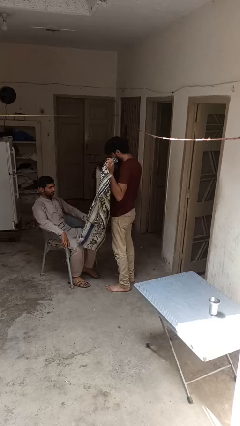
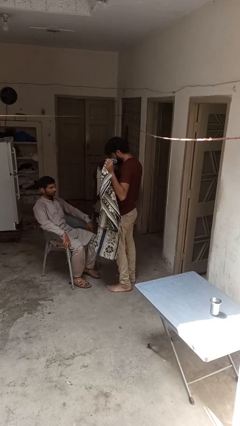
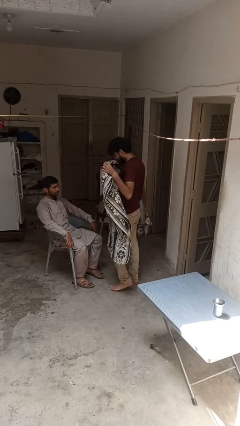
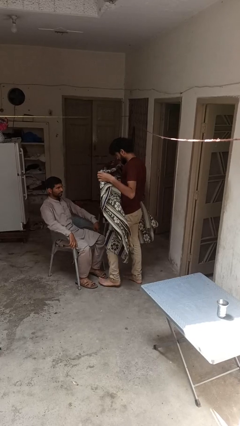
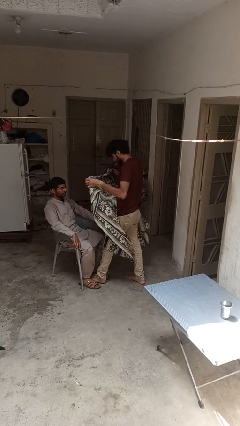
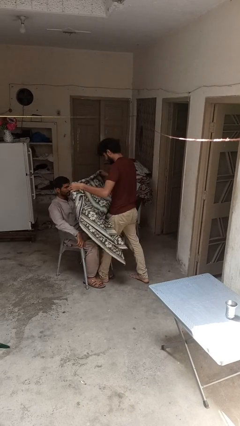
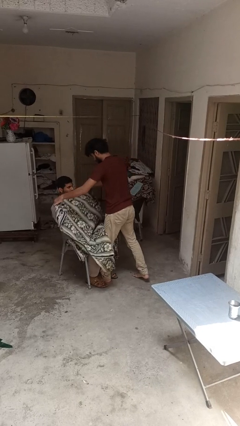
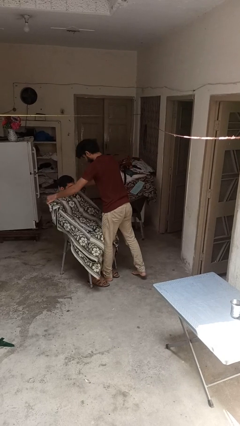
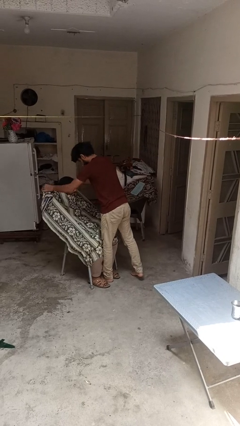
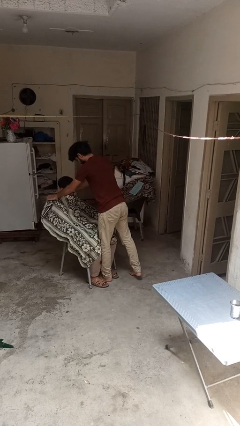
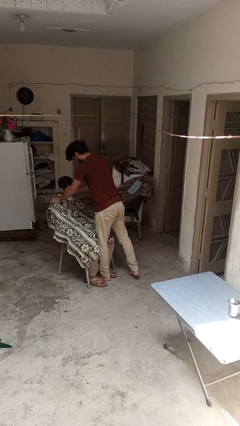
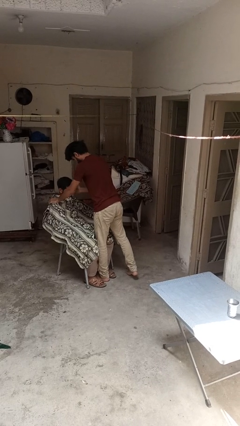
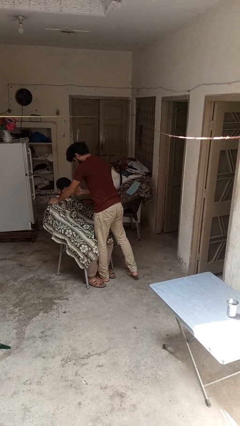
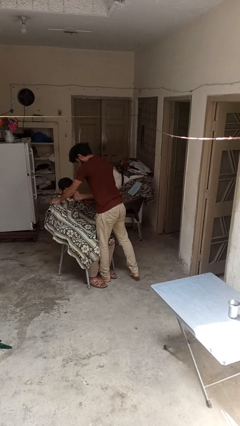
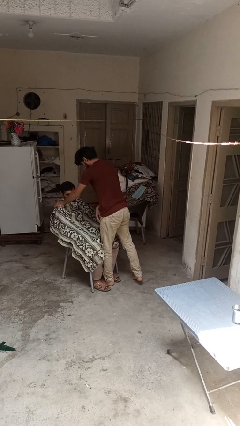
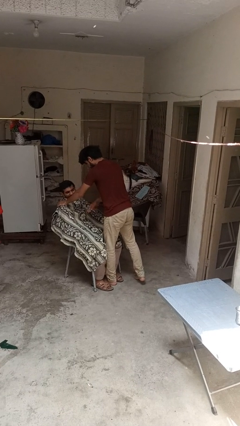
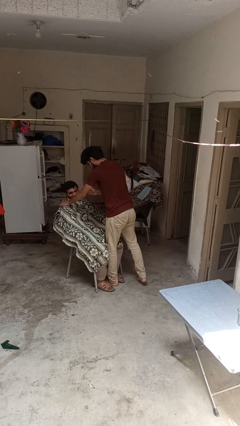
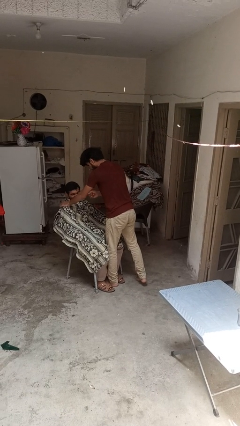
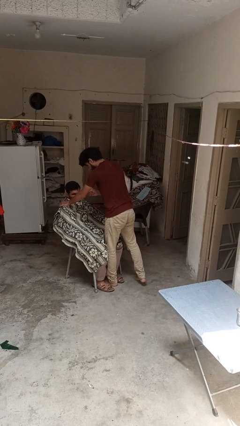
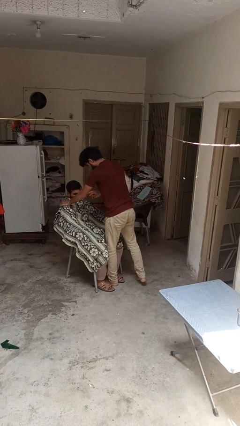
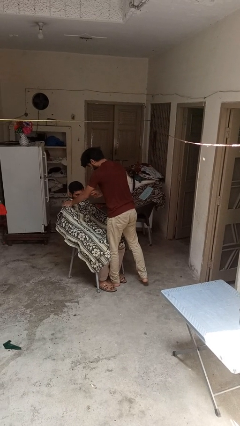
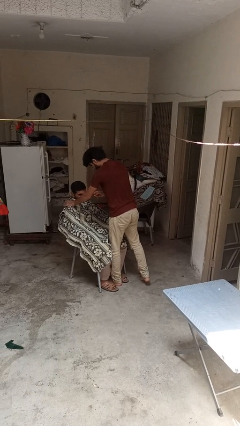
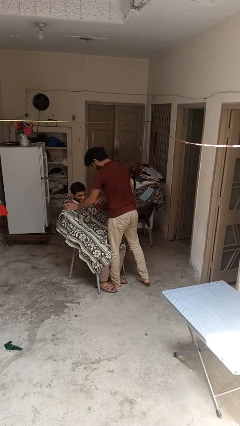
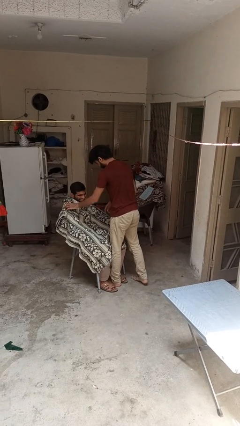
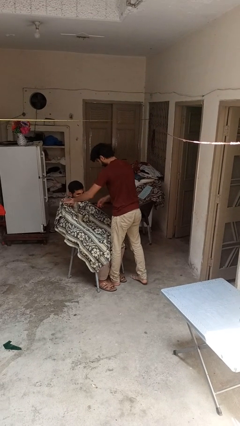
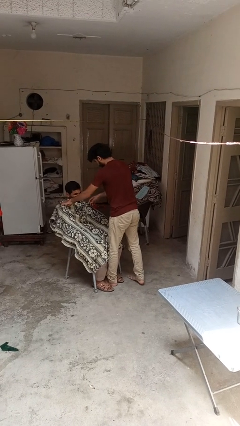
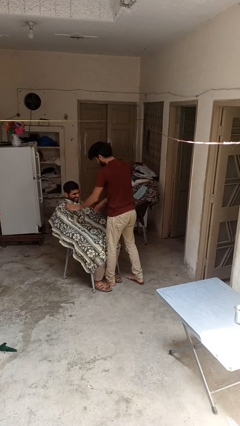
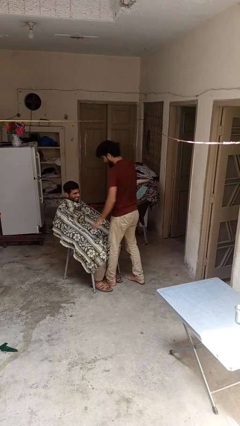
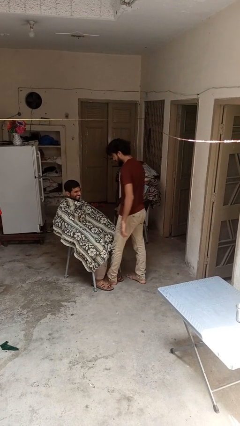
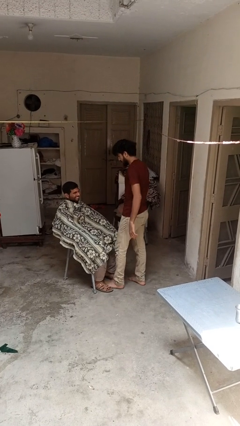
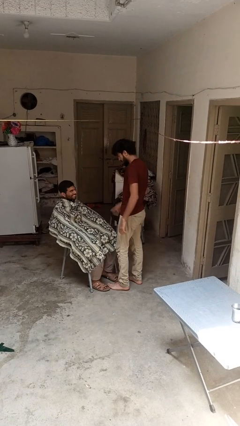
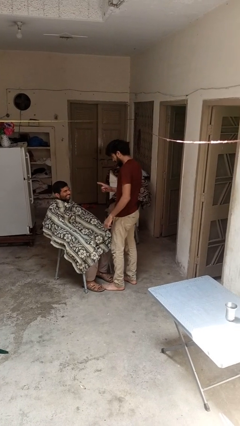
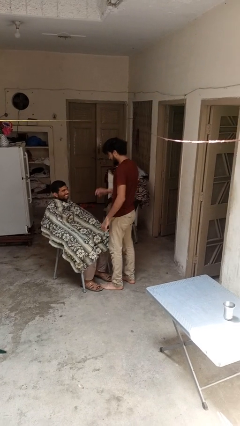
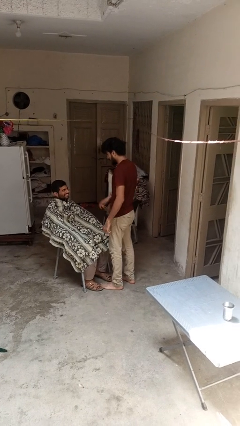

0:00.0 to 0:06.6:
person covers friend with blanket

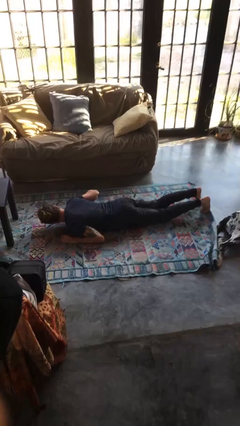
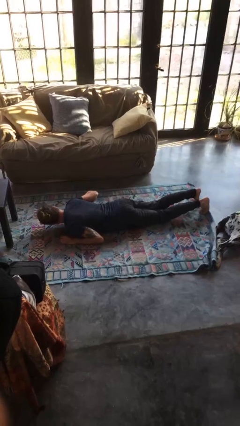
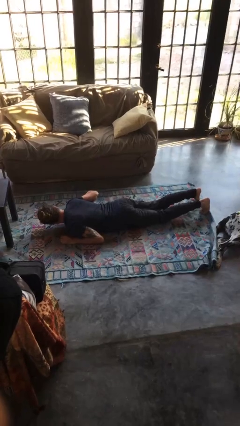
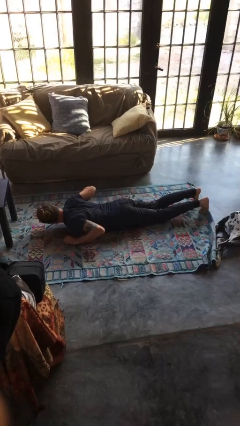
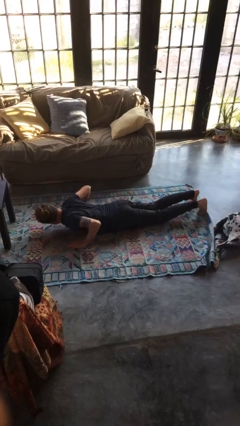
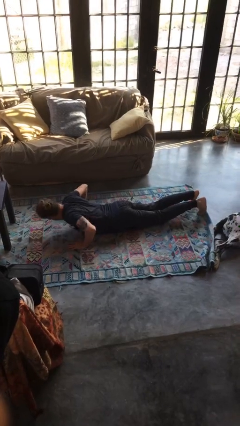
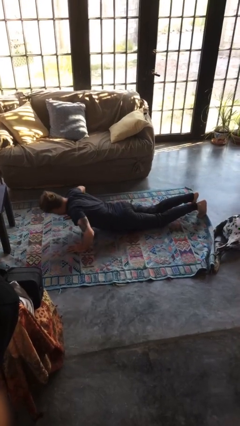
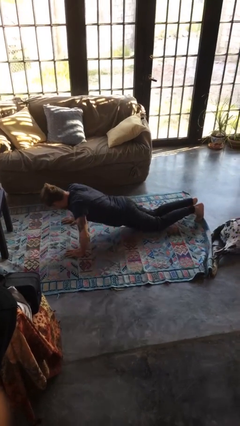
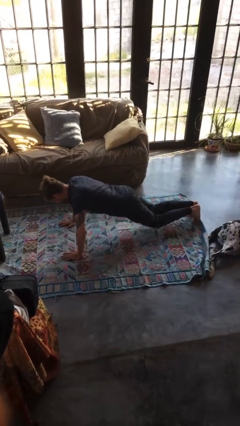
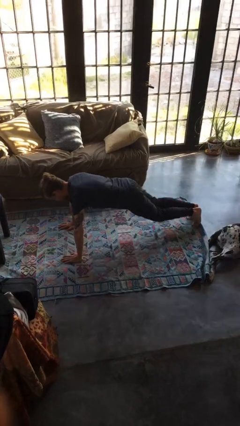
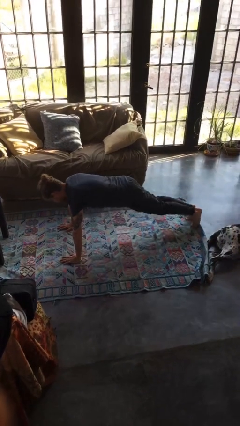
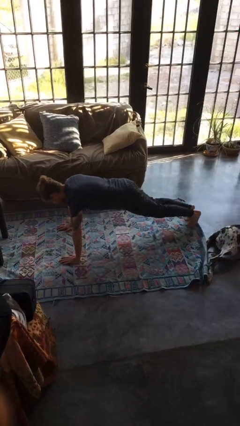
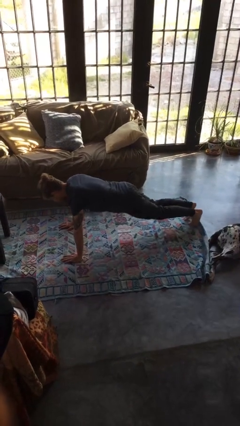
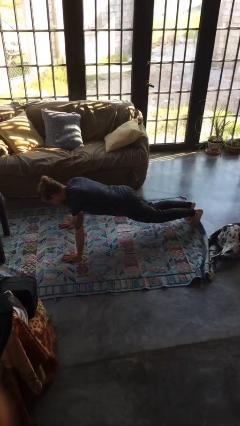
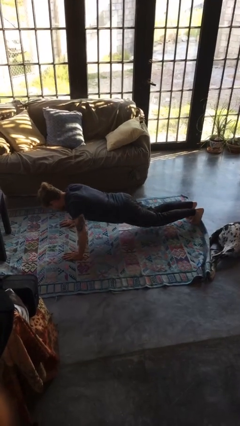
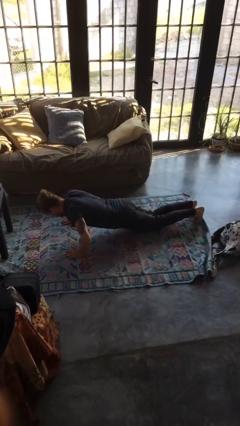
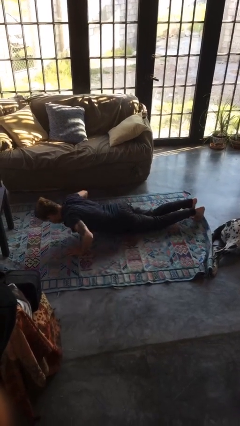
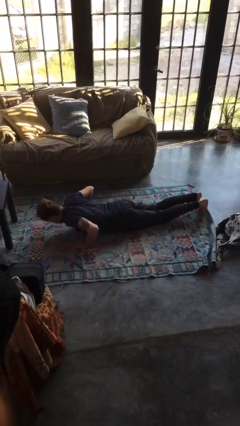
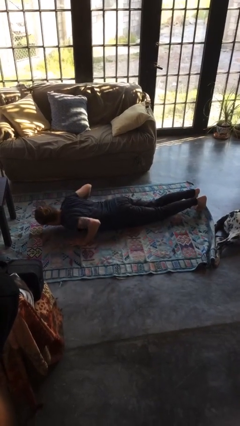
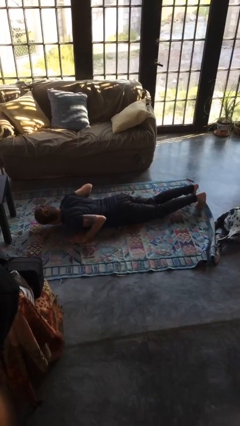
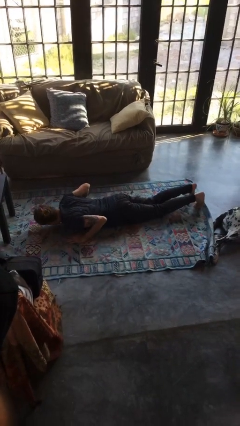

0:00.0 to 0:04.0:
person exercises with pushup

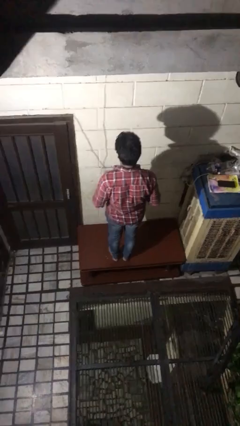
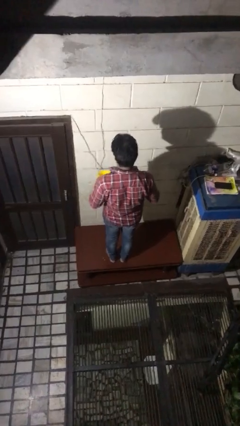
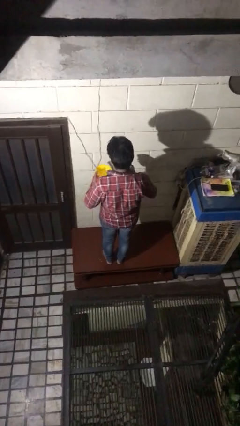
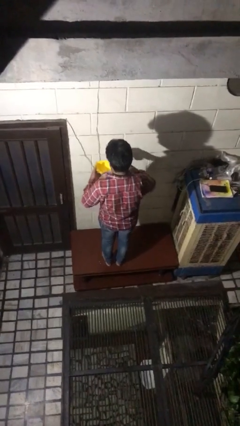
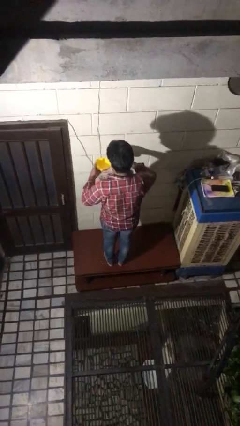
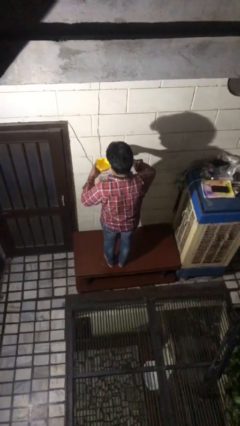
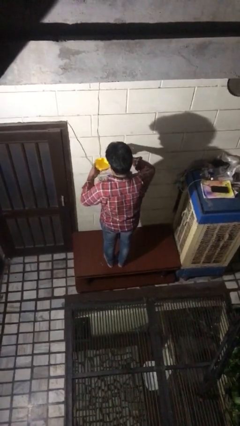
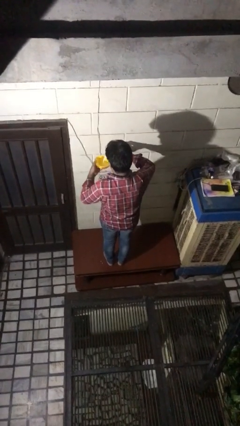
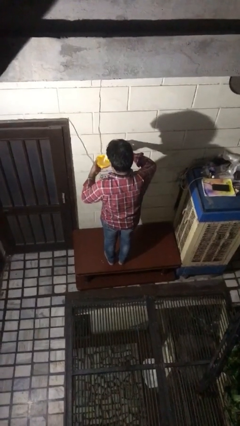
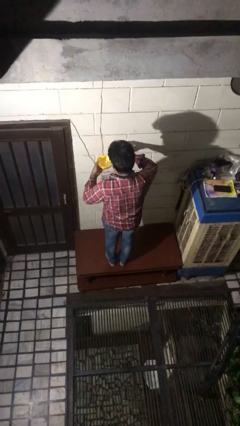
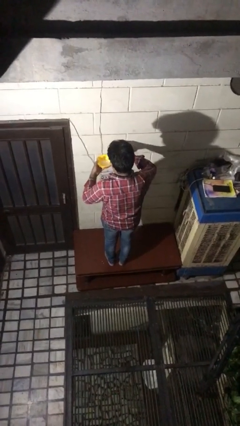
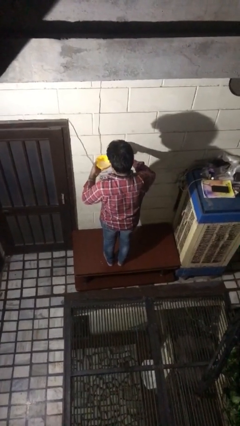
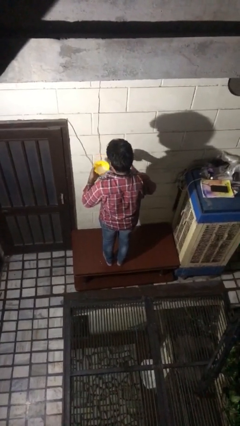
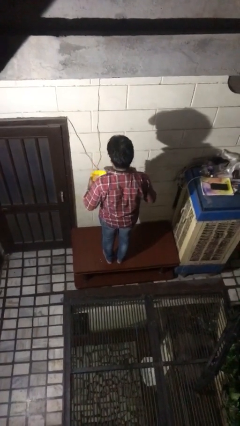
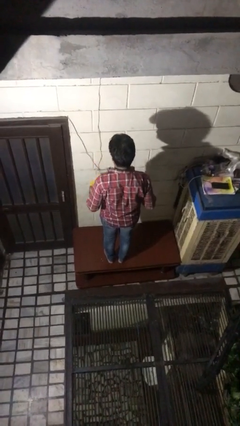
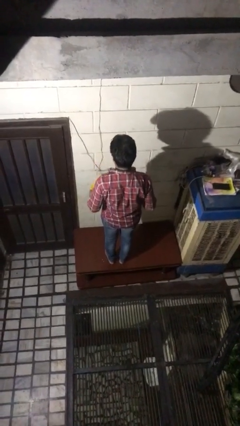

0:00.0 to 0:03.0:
person pours into bowl

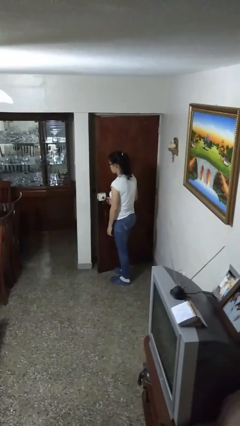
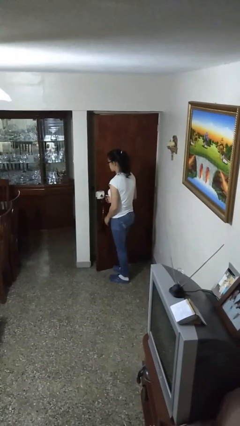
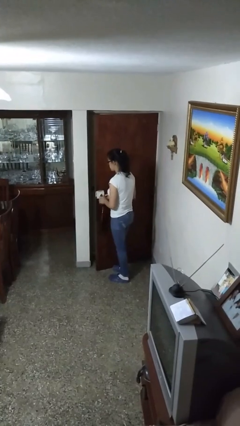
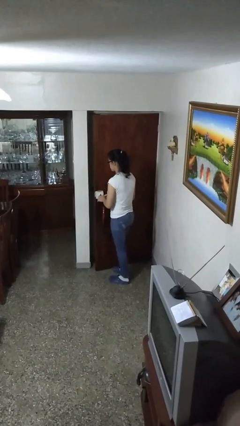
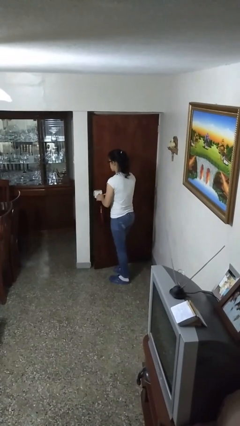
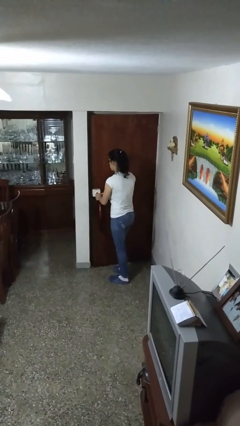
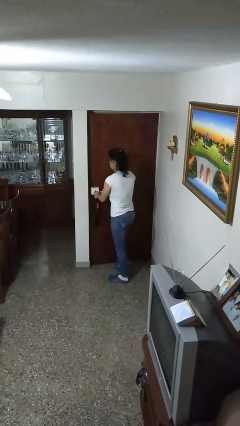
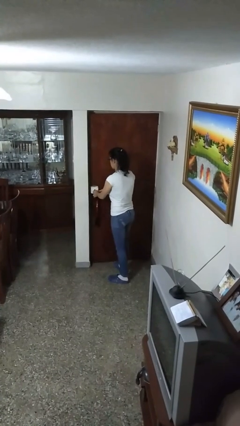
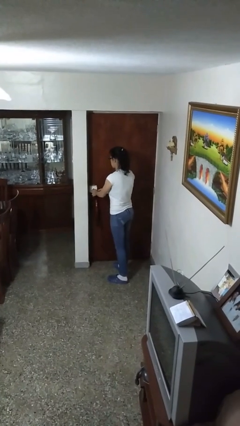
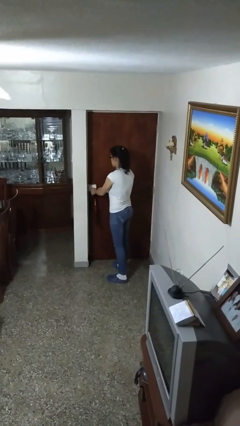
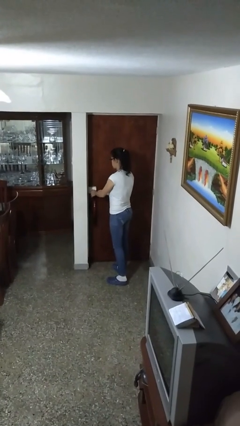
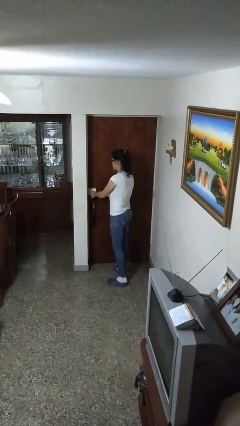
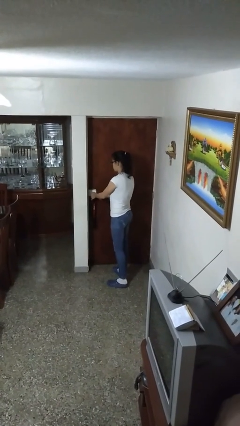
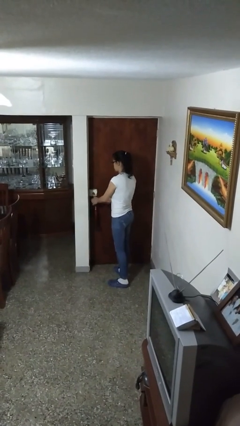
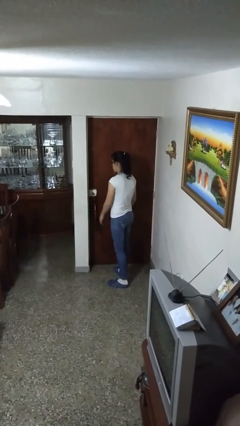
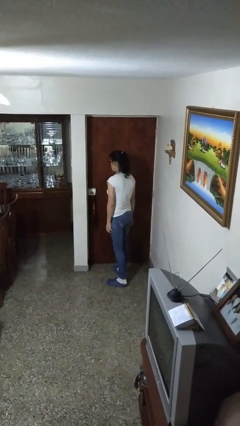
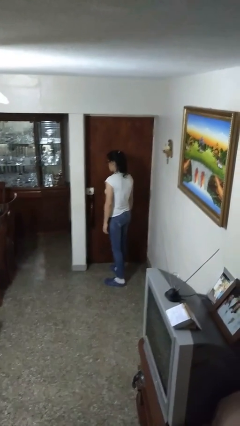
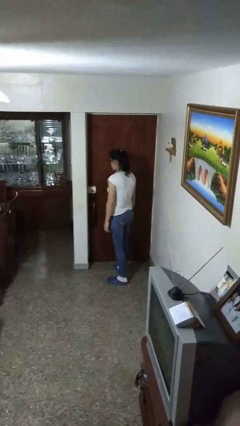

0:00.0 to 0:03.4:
person closes facility door

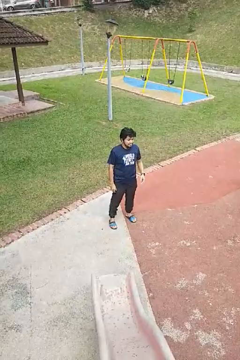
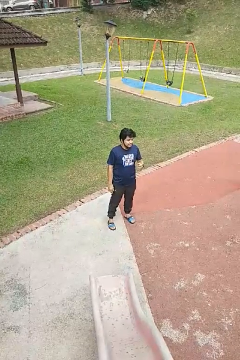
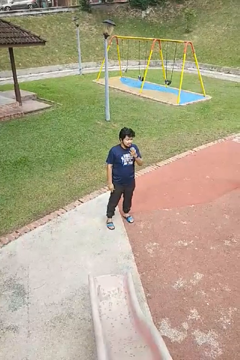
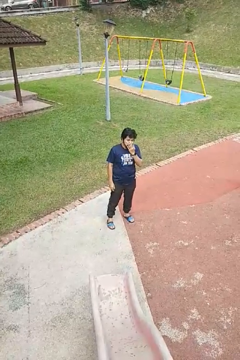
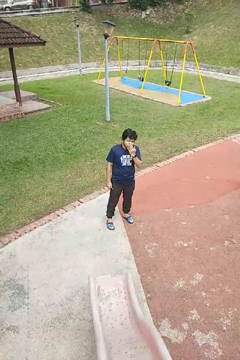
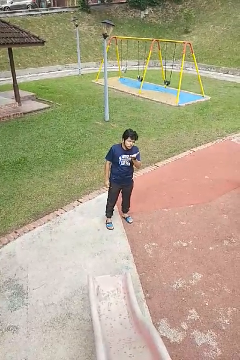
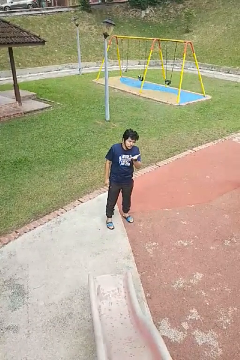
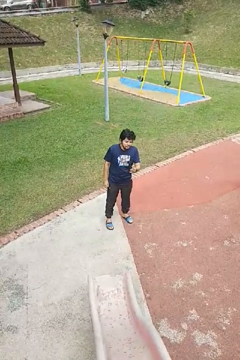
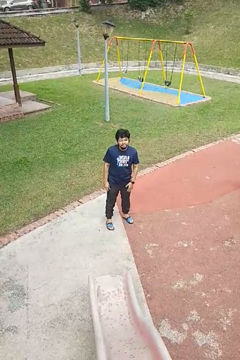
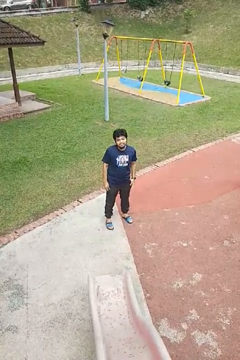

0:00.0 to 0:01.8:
person gestures blow kiss
